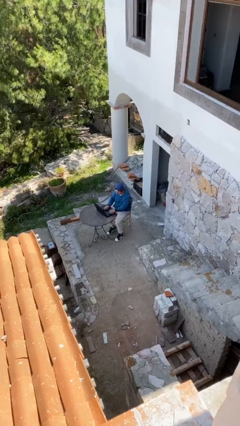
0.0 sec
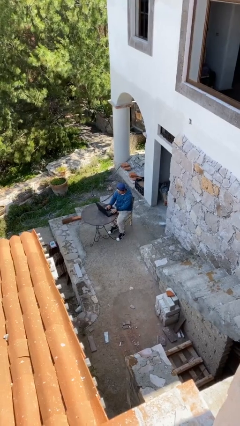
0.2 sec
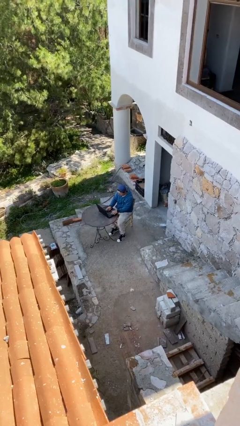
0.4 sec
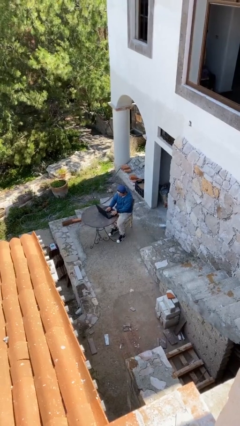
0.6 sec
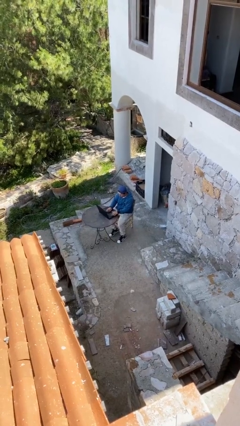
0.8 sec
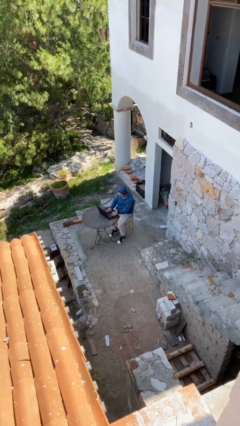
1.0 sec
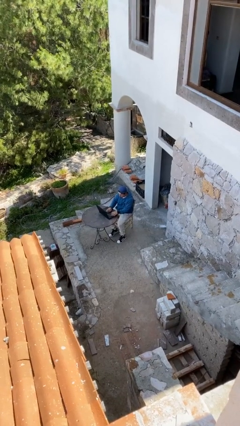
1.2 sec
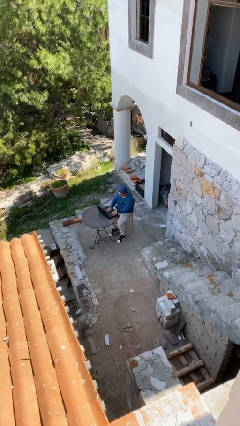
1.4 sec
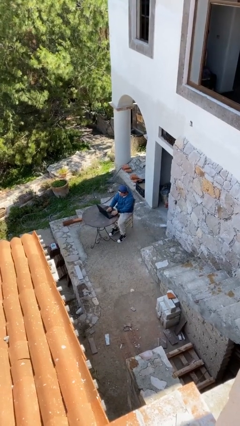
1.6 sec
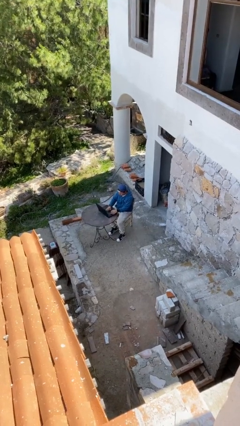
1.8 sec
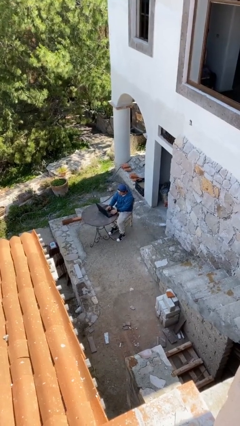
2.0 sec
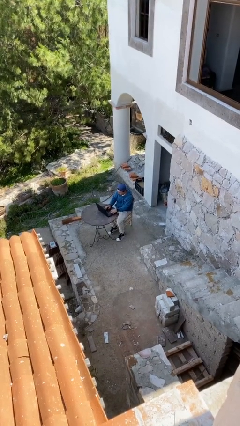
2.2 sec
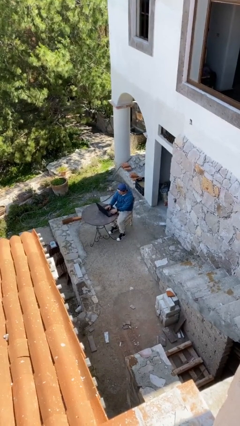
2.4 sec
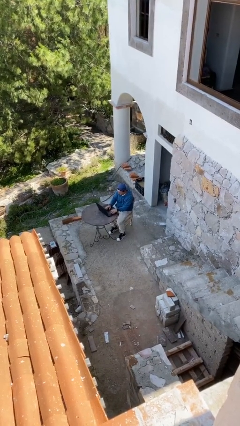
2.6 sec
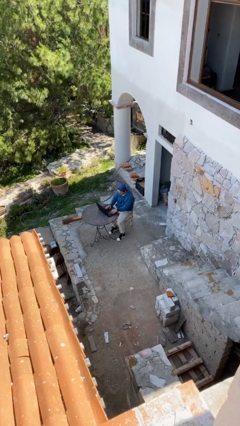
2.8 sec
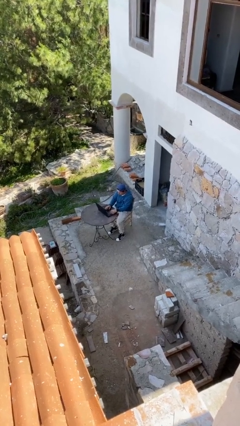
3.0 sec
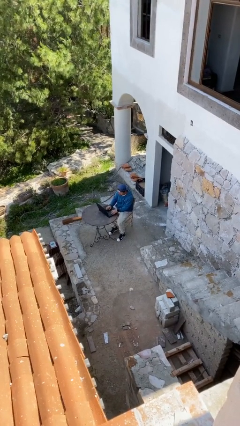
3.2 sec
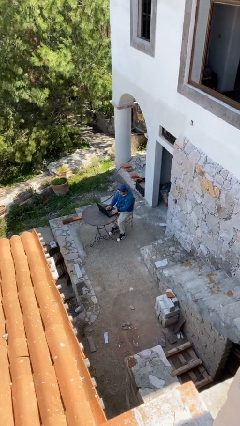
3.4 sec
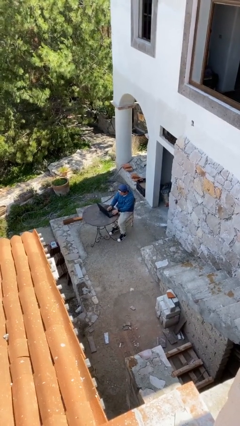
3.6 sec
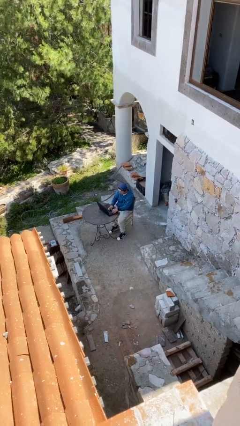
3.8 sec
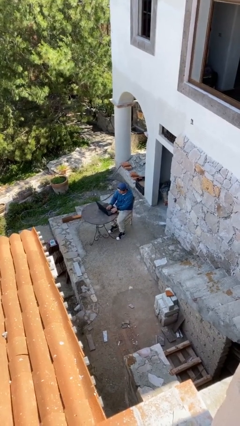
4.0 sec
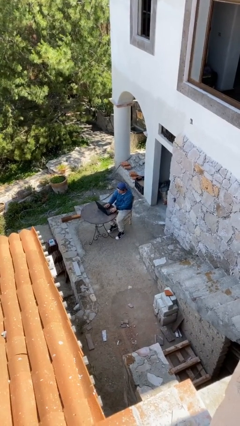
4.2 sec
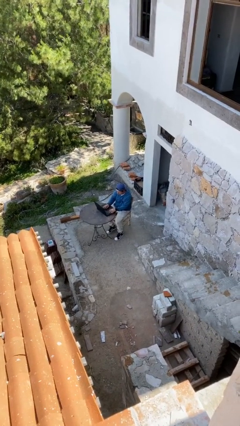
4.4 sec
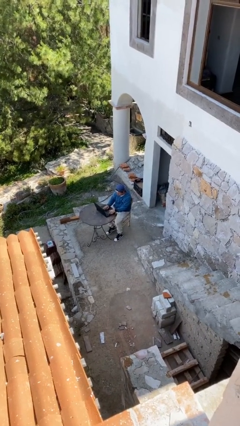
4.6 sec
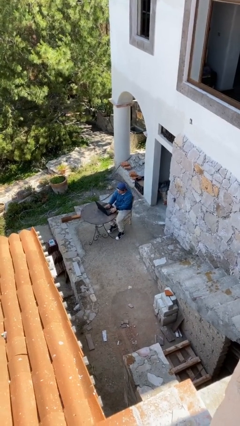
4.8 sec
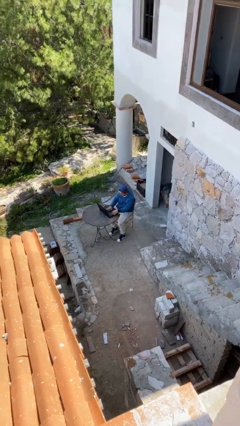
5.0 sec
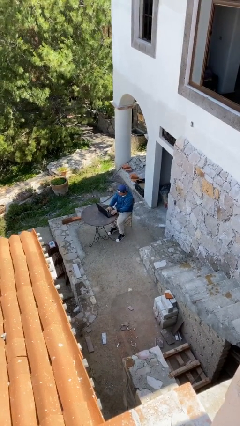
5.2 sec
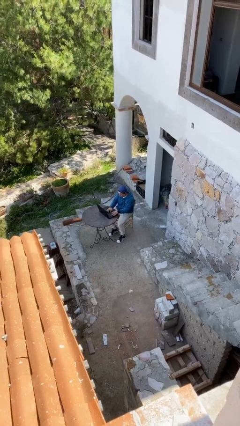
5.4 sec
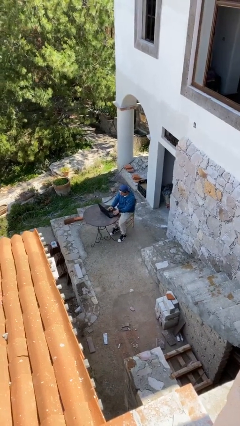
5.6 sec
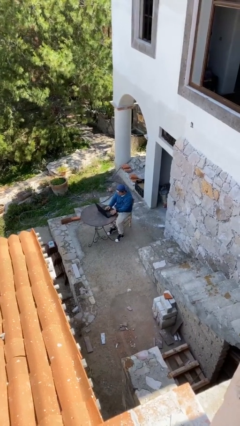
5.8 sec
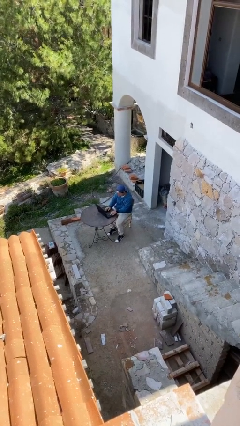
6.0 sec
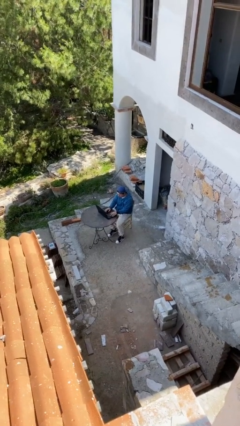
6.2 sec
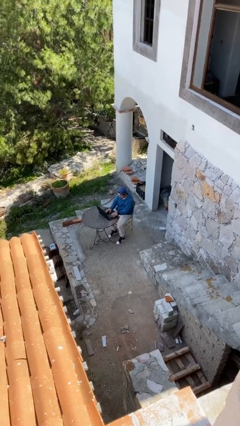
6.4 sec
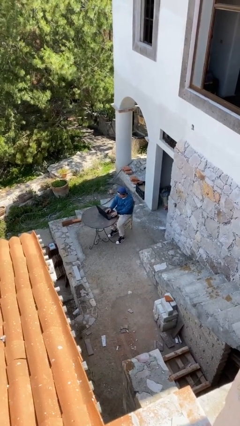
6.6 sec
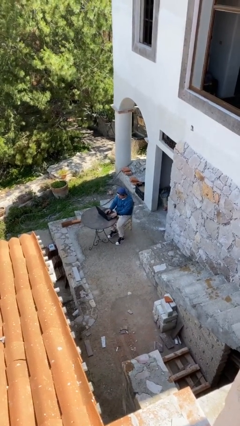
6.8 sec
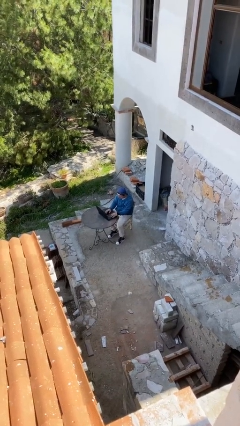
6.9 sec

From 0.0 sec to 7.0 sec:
person interacts with laptop

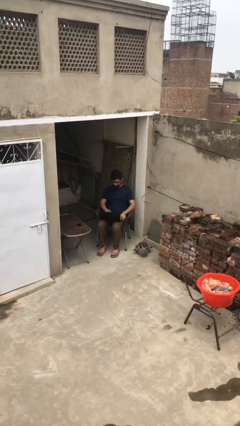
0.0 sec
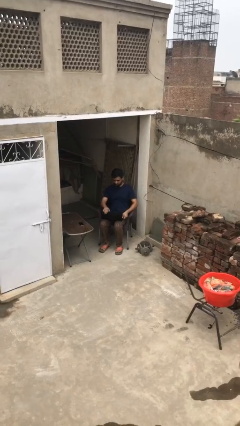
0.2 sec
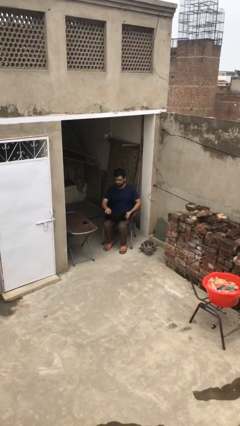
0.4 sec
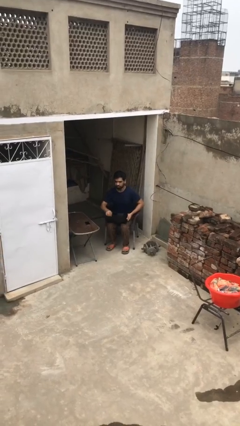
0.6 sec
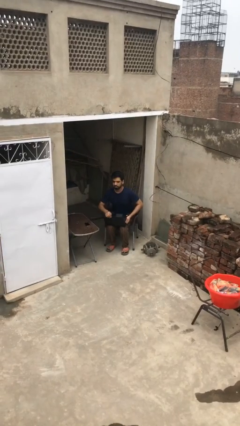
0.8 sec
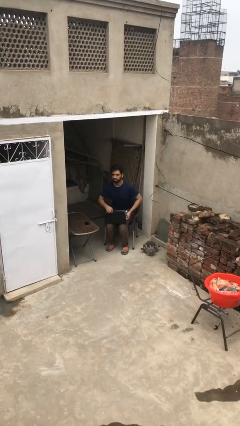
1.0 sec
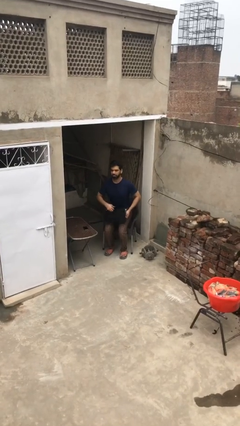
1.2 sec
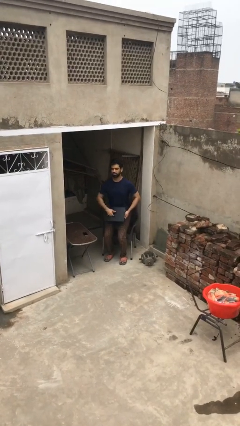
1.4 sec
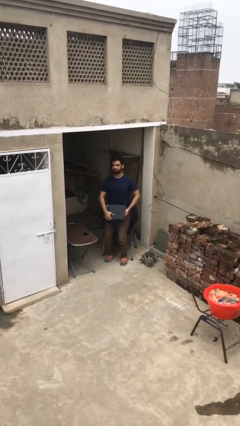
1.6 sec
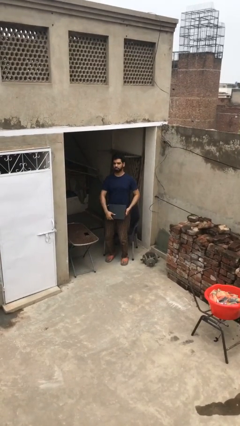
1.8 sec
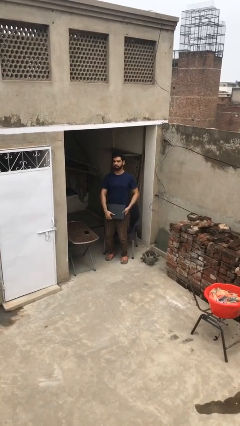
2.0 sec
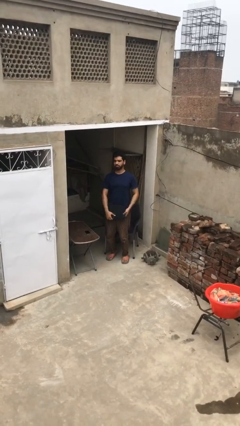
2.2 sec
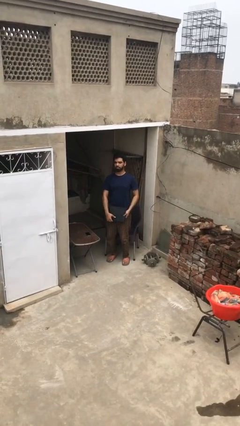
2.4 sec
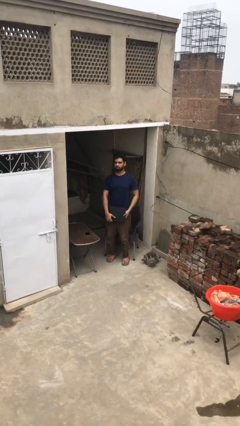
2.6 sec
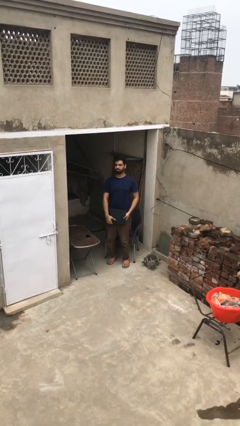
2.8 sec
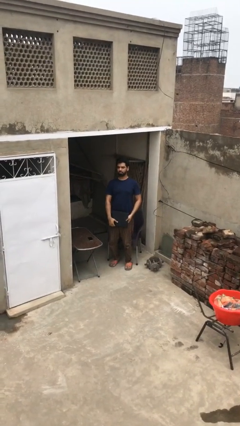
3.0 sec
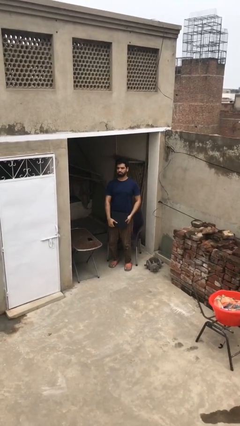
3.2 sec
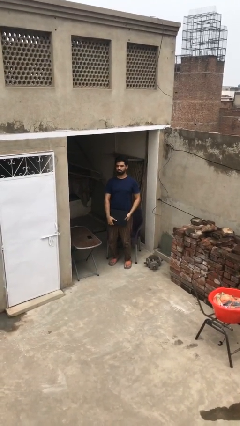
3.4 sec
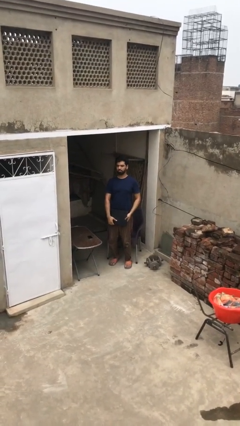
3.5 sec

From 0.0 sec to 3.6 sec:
person stands up

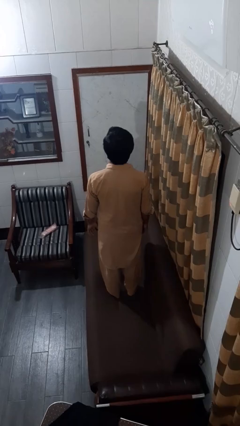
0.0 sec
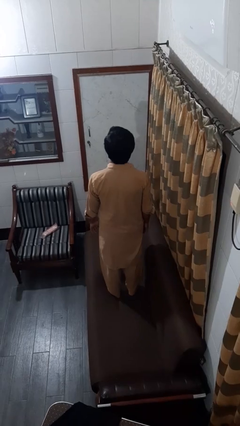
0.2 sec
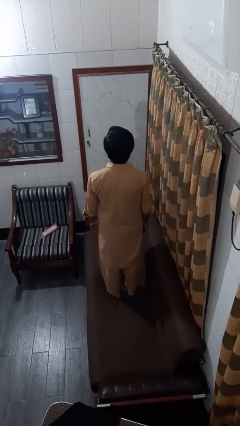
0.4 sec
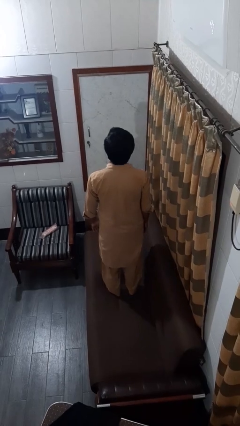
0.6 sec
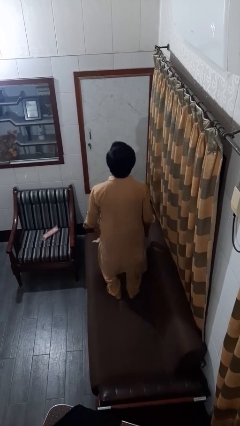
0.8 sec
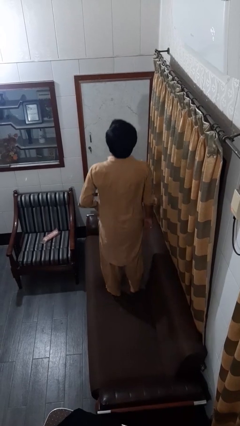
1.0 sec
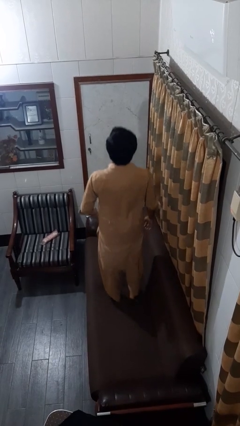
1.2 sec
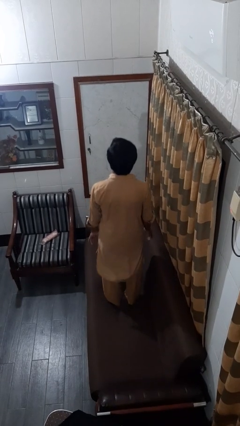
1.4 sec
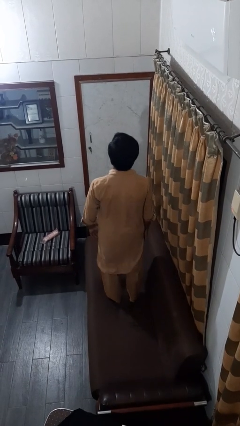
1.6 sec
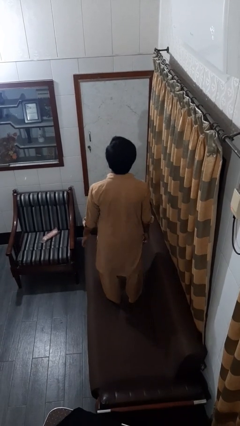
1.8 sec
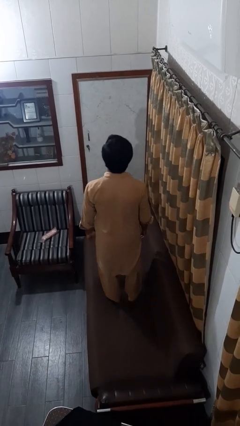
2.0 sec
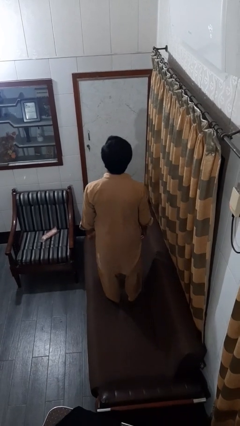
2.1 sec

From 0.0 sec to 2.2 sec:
person jumps on couch

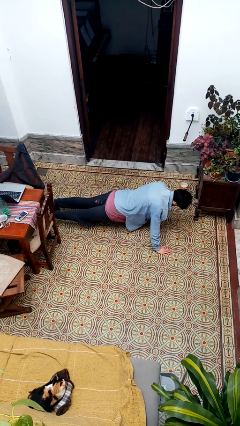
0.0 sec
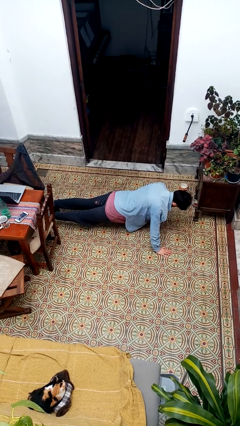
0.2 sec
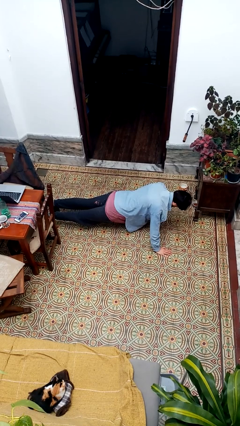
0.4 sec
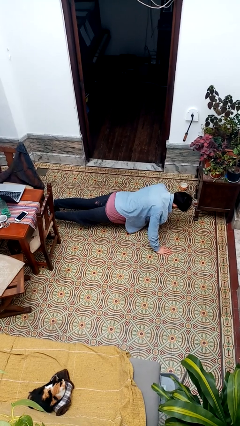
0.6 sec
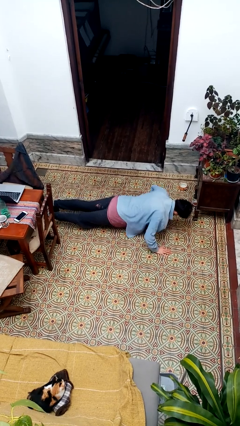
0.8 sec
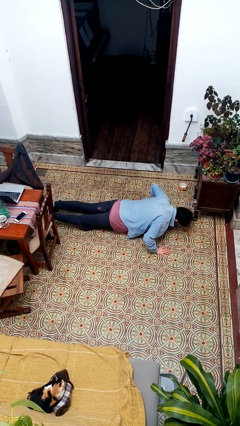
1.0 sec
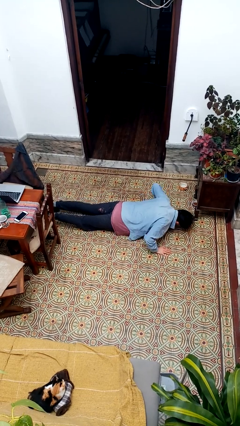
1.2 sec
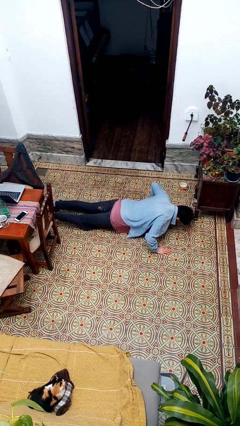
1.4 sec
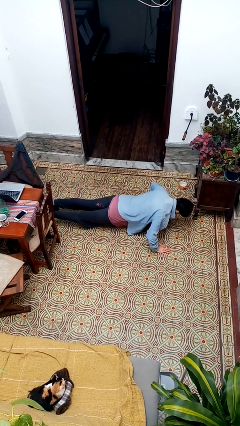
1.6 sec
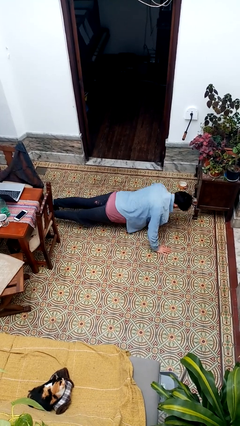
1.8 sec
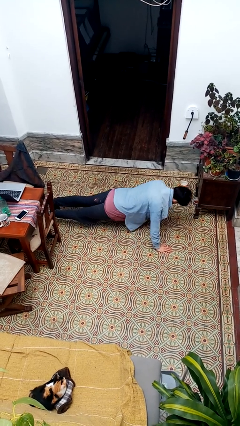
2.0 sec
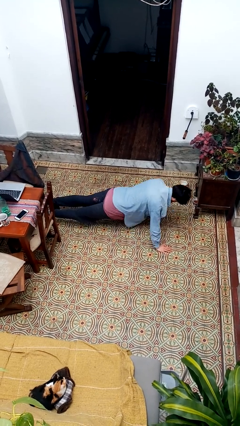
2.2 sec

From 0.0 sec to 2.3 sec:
person exercises with pushup

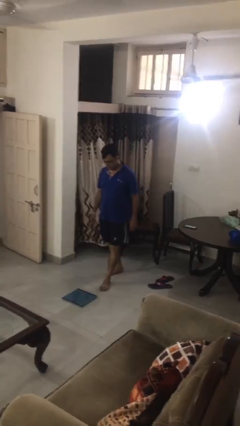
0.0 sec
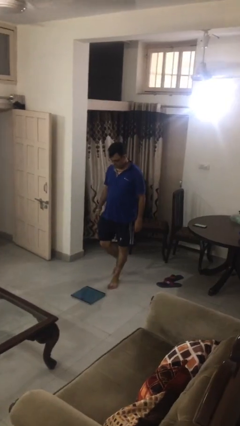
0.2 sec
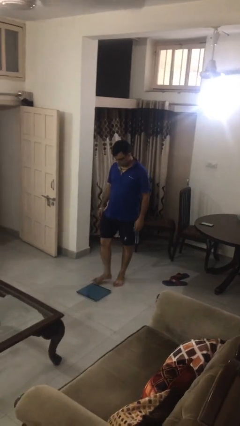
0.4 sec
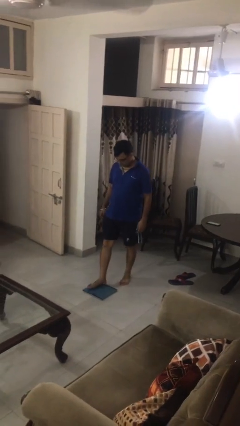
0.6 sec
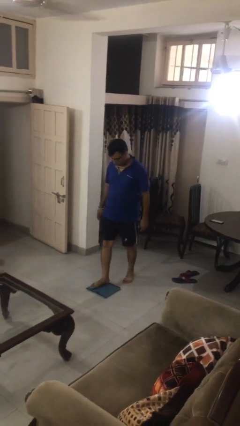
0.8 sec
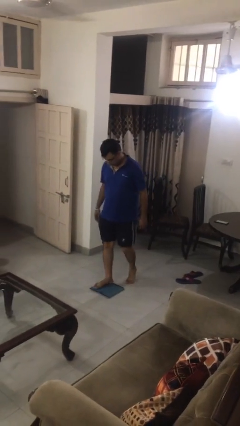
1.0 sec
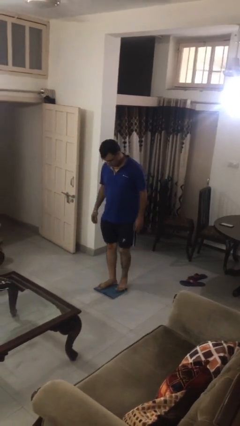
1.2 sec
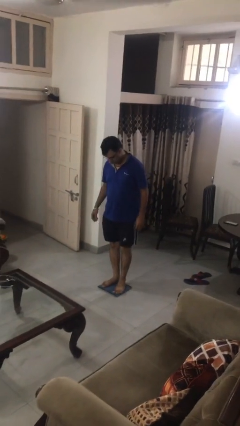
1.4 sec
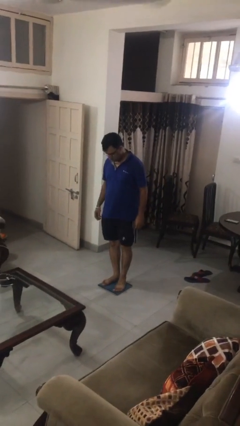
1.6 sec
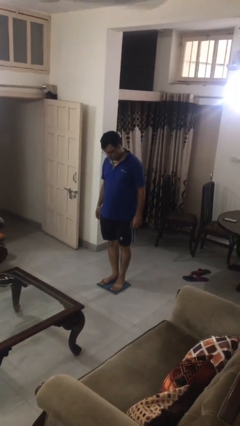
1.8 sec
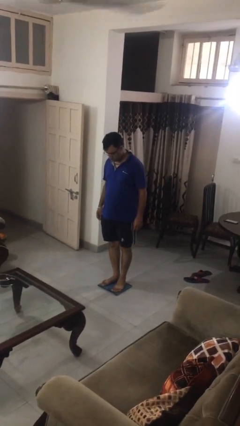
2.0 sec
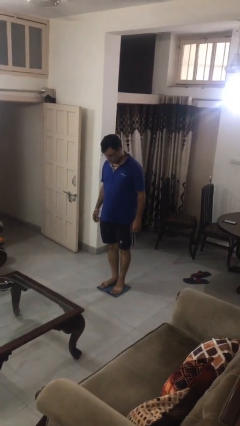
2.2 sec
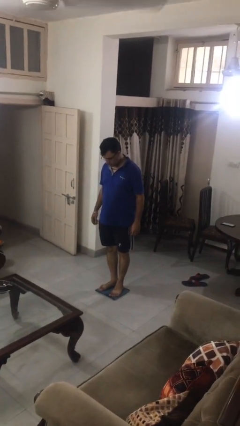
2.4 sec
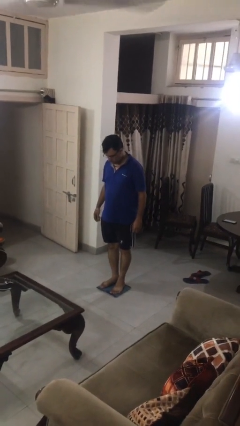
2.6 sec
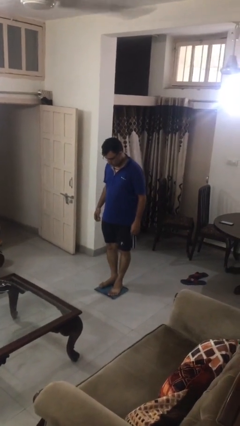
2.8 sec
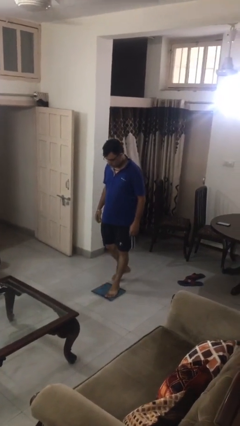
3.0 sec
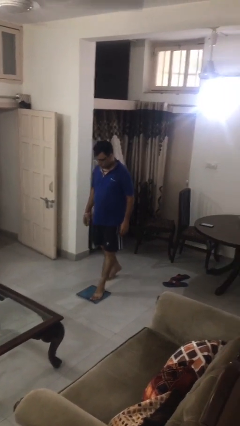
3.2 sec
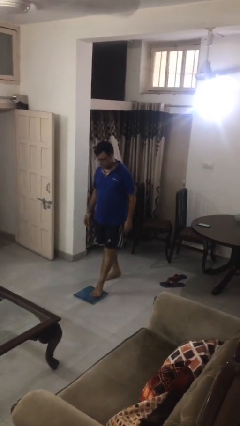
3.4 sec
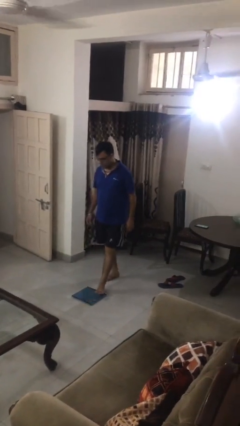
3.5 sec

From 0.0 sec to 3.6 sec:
person uses bodyweight scale
